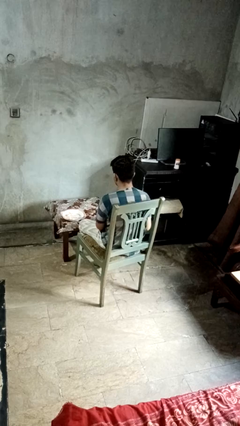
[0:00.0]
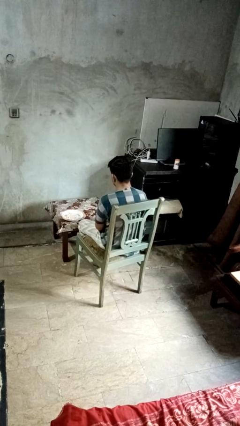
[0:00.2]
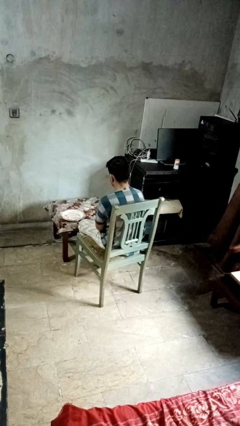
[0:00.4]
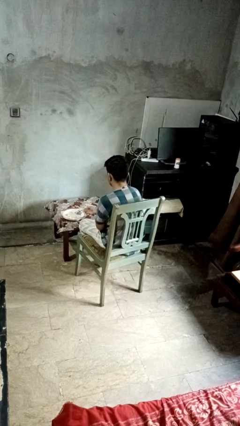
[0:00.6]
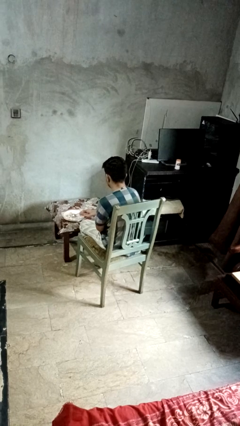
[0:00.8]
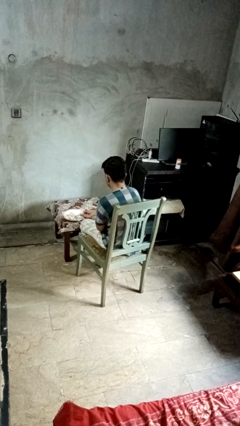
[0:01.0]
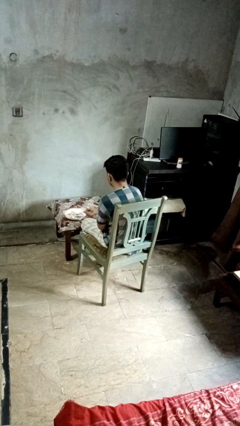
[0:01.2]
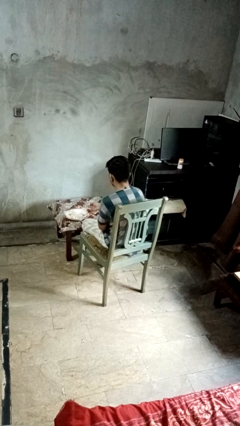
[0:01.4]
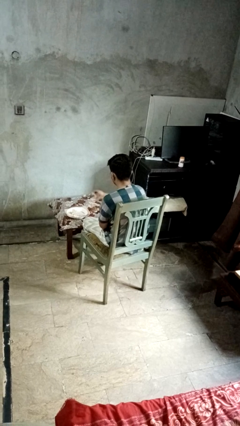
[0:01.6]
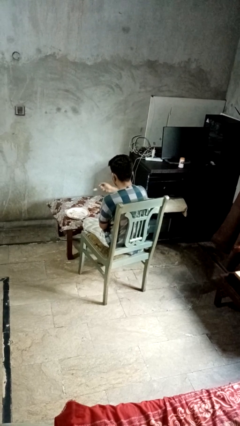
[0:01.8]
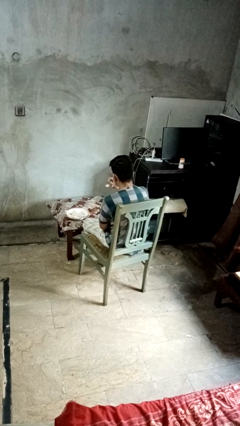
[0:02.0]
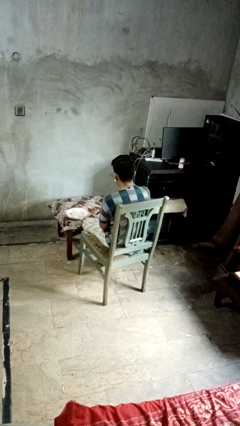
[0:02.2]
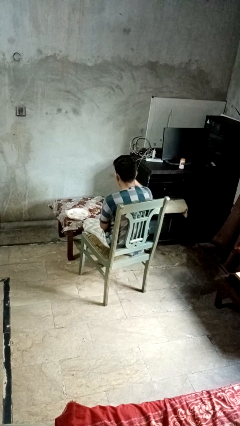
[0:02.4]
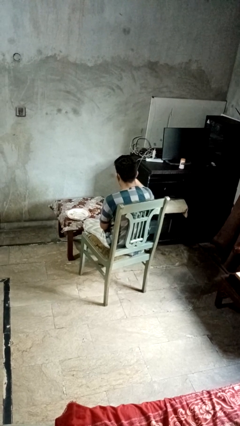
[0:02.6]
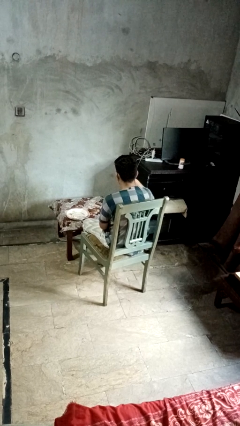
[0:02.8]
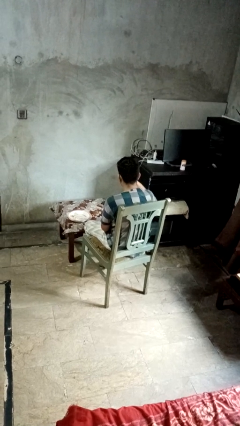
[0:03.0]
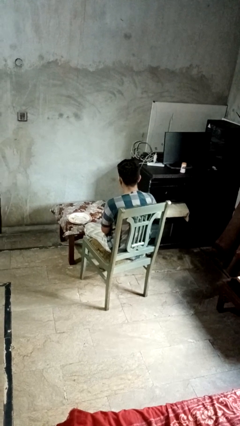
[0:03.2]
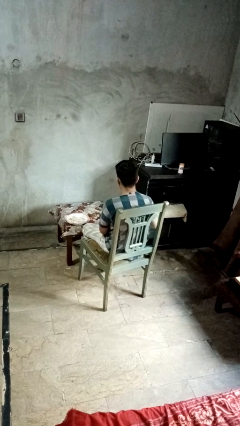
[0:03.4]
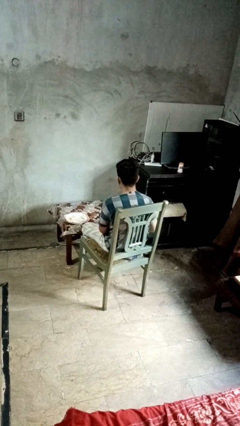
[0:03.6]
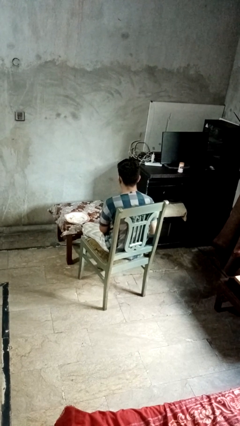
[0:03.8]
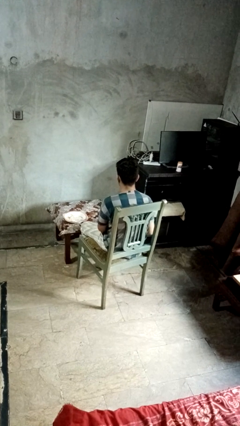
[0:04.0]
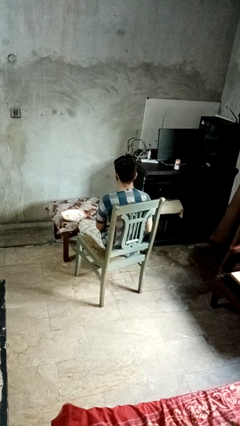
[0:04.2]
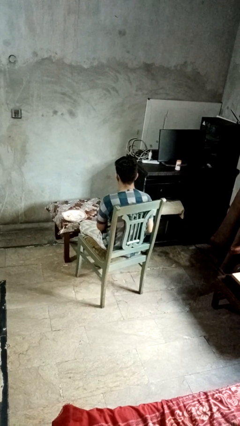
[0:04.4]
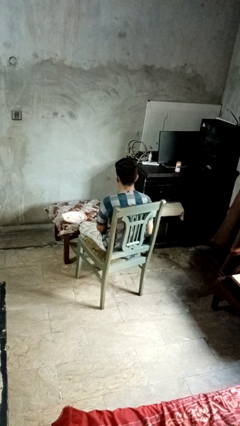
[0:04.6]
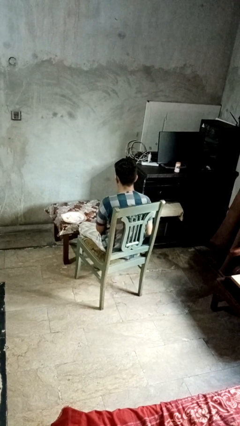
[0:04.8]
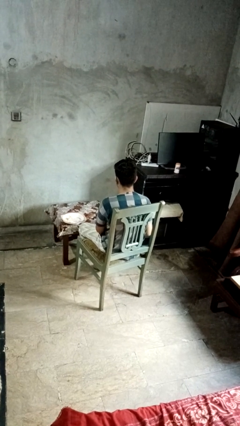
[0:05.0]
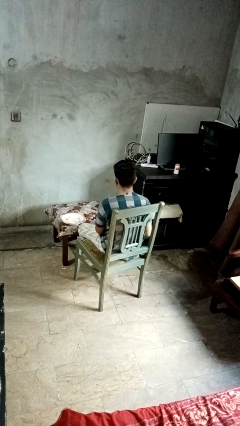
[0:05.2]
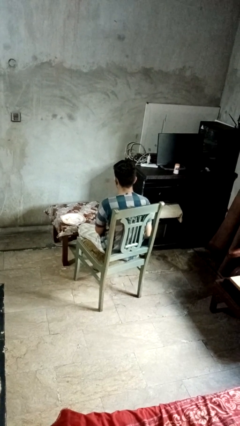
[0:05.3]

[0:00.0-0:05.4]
person eats with utensil

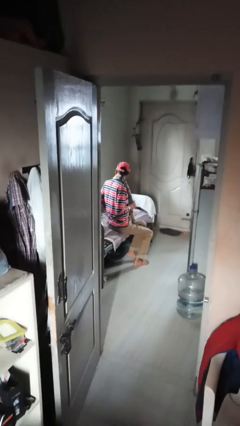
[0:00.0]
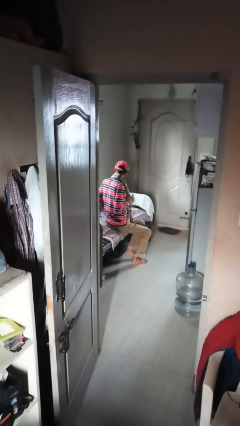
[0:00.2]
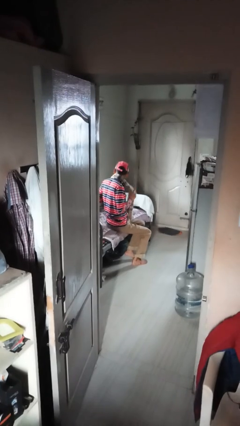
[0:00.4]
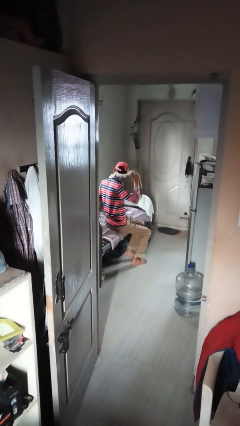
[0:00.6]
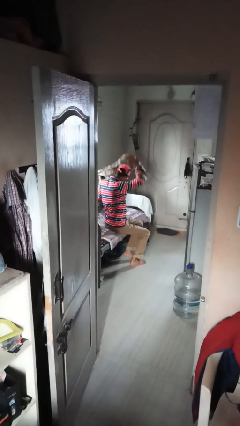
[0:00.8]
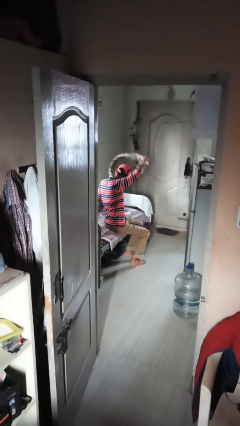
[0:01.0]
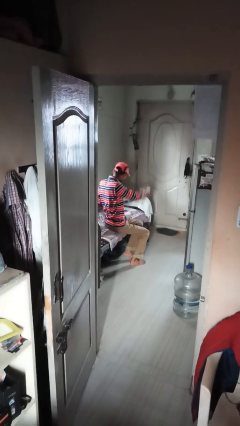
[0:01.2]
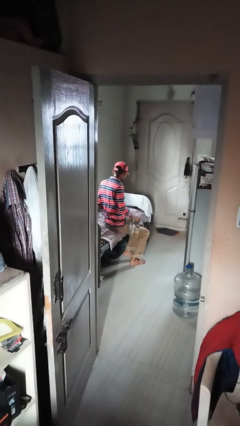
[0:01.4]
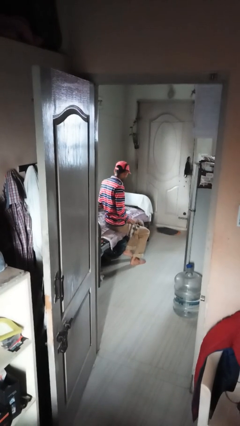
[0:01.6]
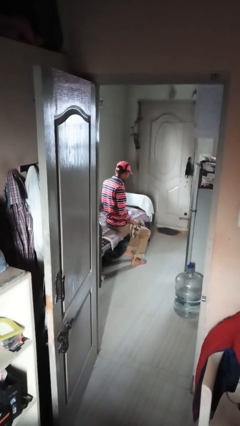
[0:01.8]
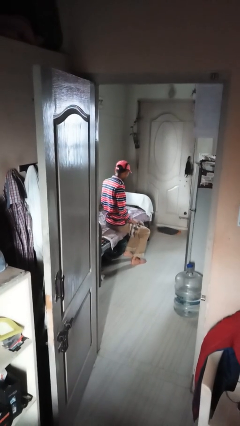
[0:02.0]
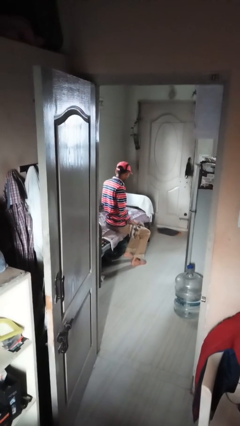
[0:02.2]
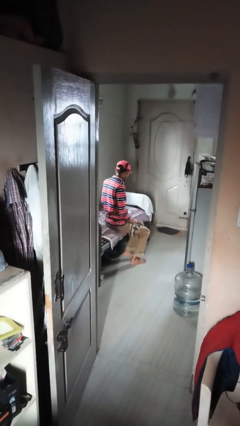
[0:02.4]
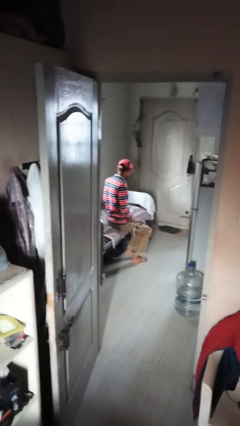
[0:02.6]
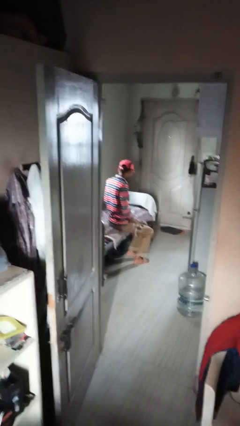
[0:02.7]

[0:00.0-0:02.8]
person takes off scarf

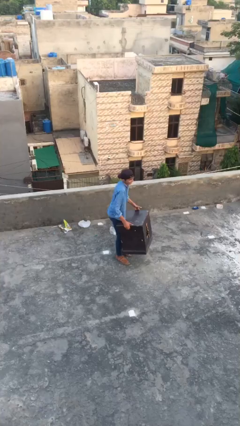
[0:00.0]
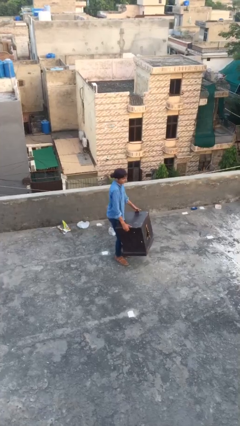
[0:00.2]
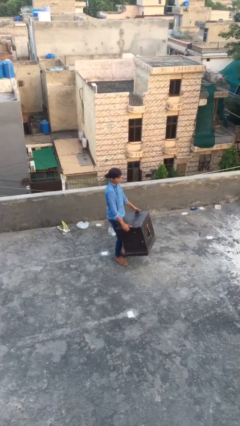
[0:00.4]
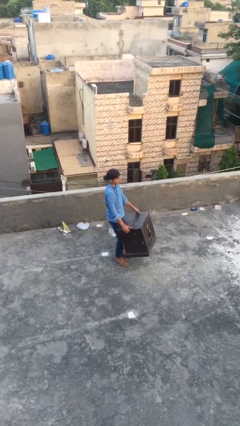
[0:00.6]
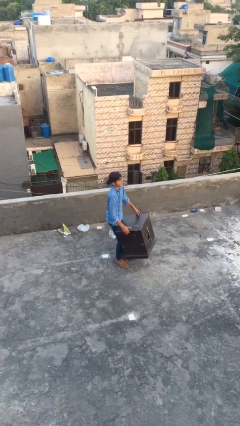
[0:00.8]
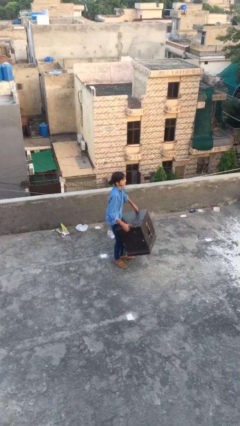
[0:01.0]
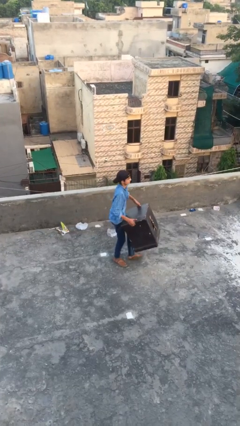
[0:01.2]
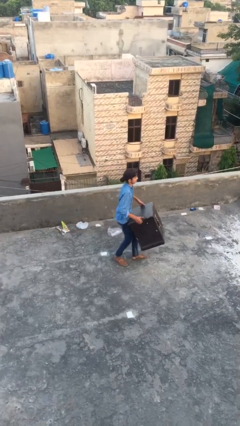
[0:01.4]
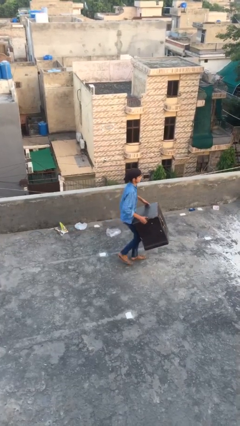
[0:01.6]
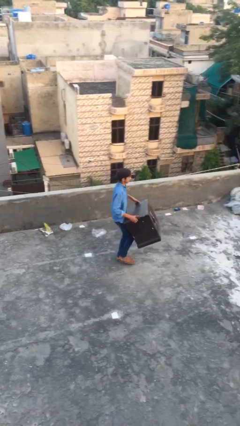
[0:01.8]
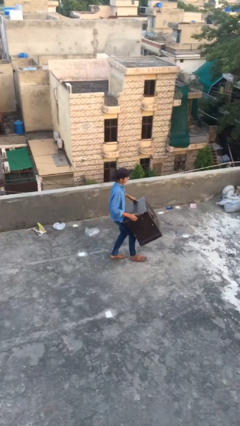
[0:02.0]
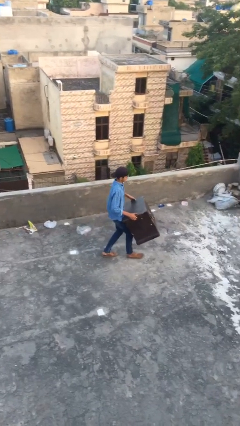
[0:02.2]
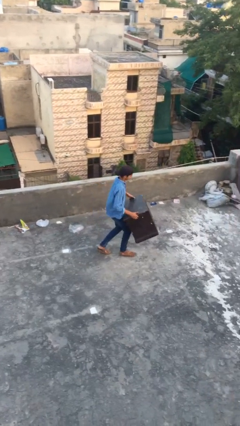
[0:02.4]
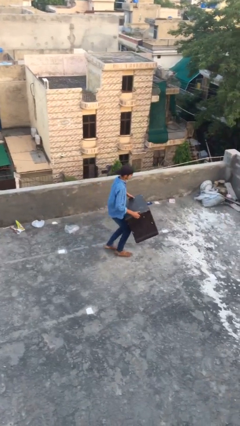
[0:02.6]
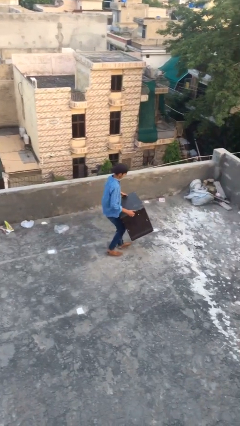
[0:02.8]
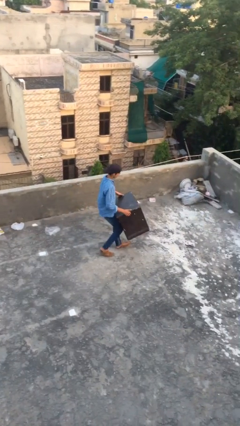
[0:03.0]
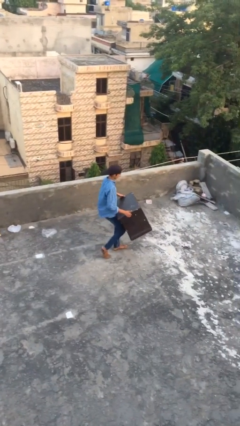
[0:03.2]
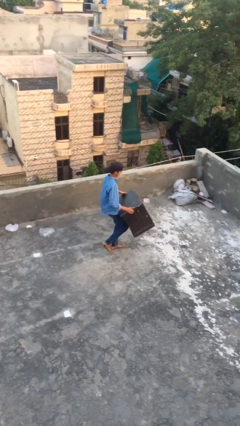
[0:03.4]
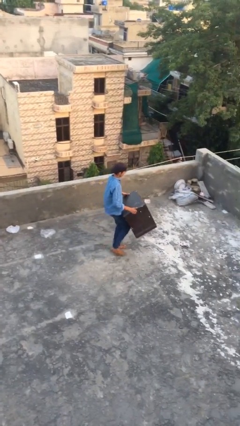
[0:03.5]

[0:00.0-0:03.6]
person carries heavy object

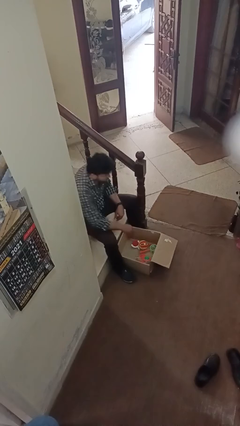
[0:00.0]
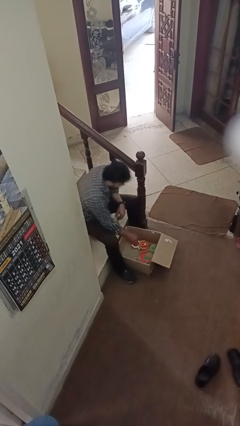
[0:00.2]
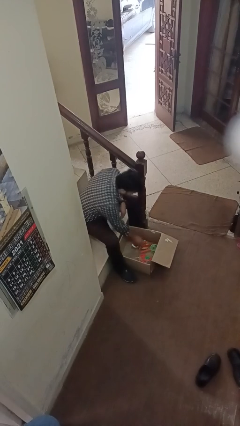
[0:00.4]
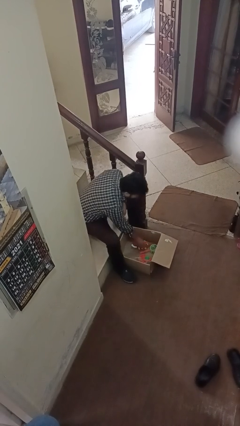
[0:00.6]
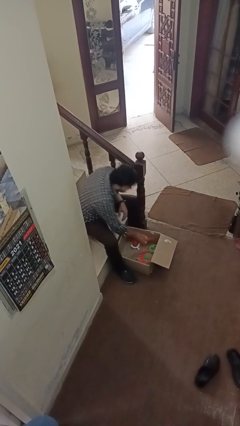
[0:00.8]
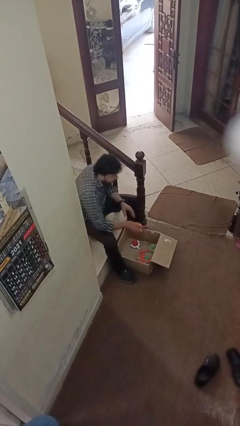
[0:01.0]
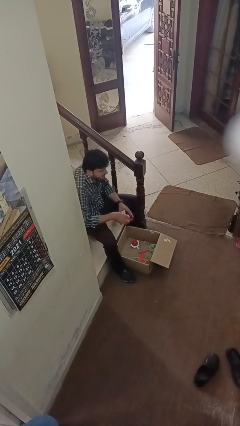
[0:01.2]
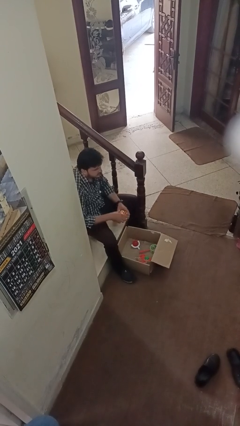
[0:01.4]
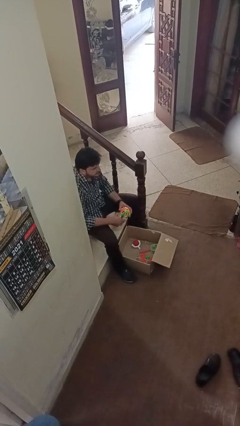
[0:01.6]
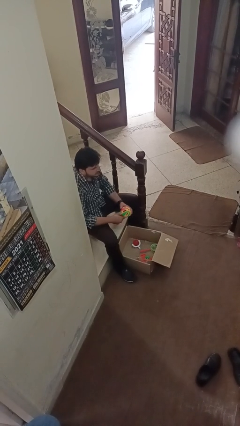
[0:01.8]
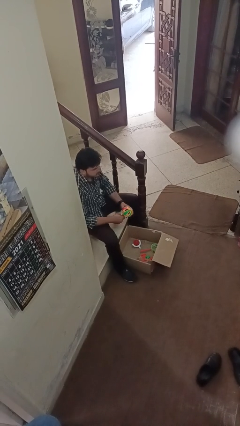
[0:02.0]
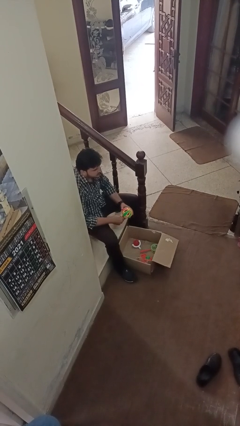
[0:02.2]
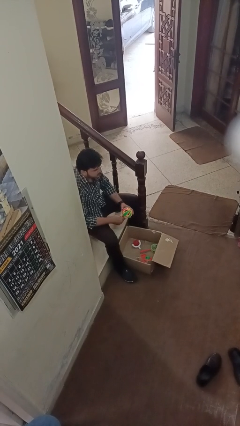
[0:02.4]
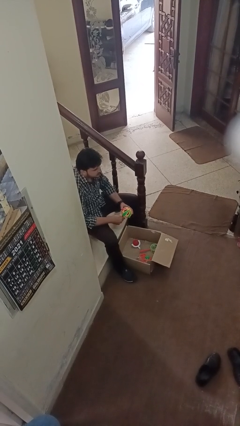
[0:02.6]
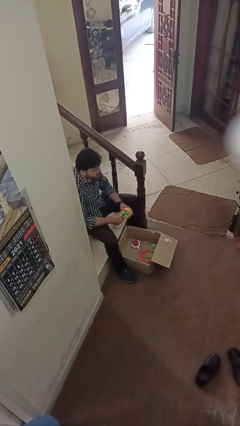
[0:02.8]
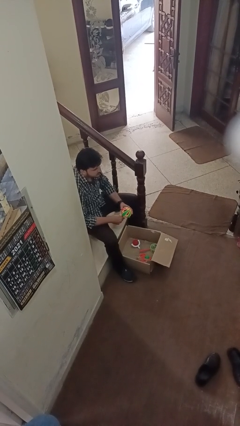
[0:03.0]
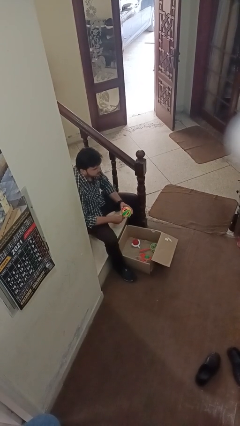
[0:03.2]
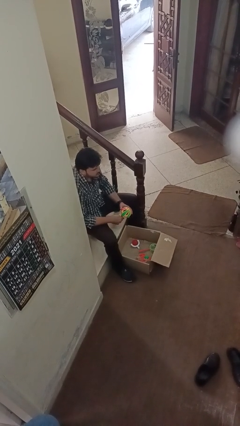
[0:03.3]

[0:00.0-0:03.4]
person takes object from box

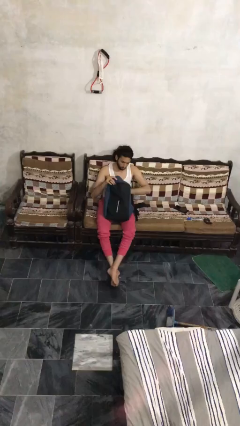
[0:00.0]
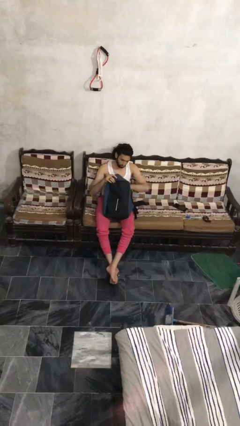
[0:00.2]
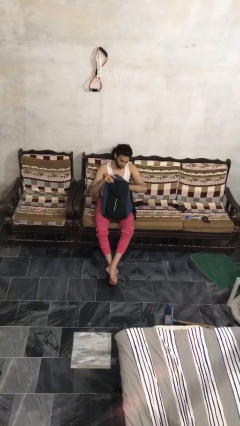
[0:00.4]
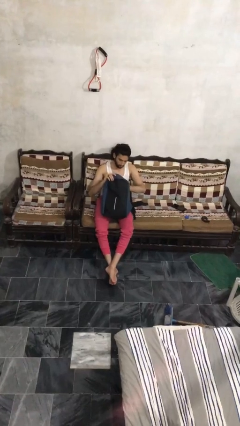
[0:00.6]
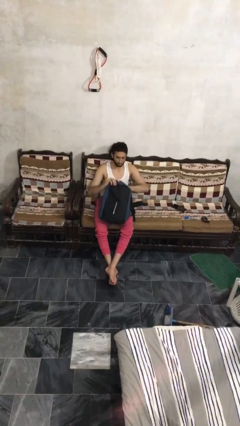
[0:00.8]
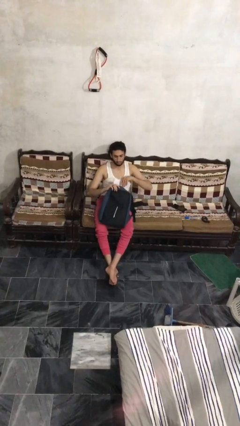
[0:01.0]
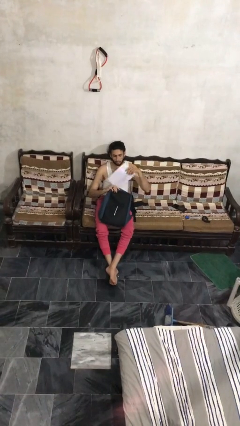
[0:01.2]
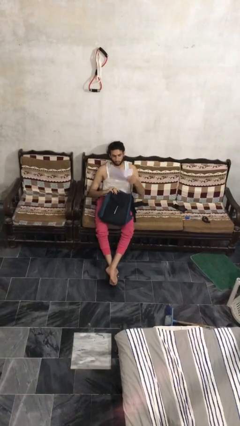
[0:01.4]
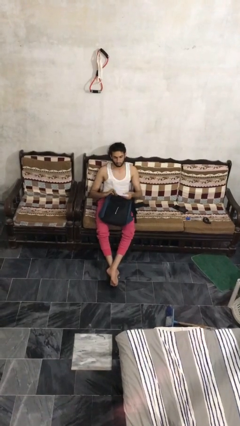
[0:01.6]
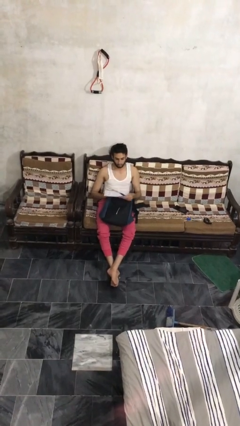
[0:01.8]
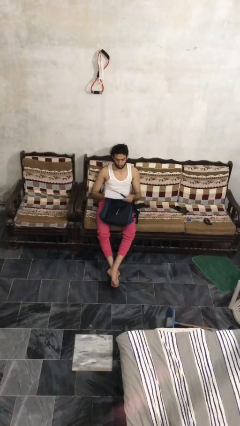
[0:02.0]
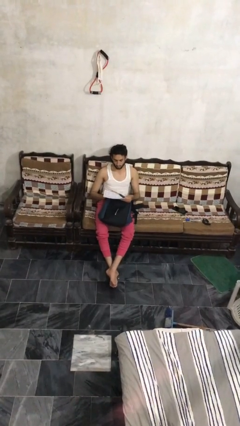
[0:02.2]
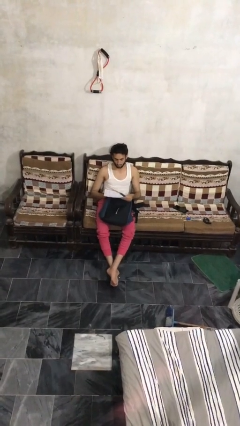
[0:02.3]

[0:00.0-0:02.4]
person takes object from backpack
